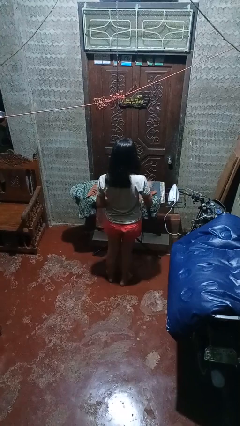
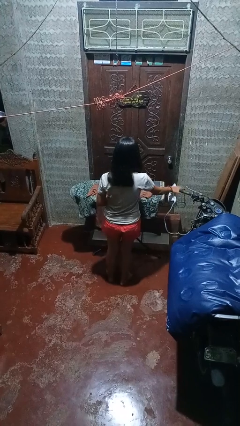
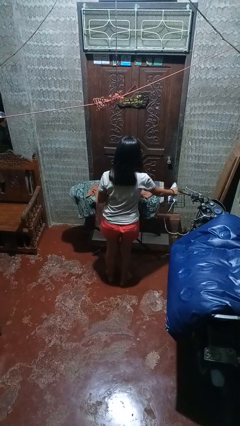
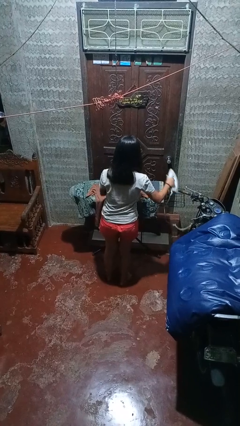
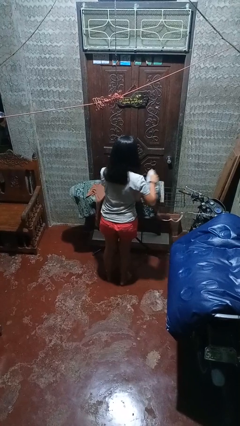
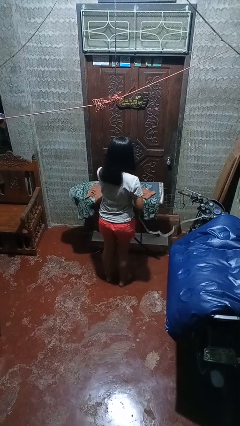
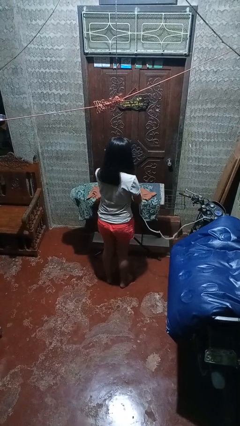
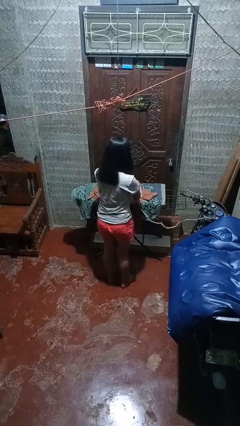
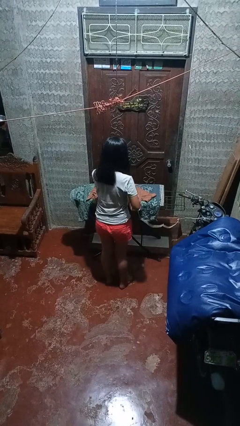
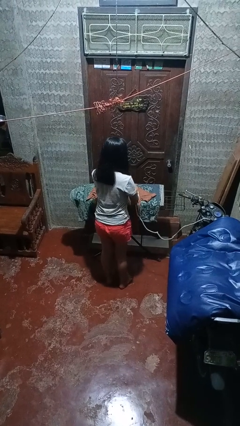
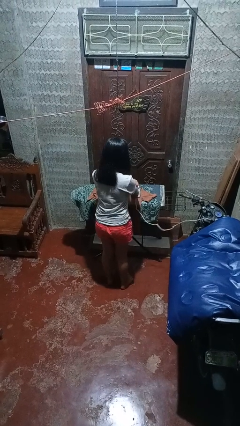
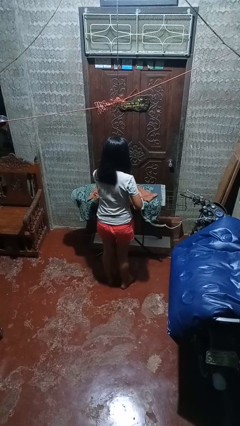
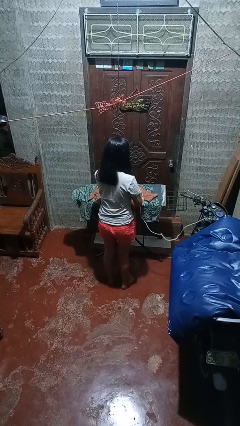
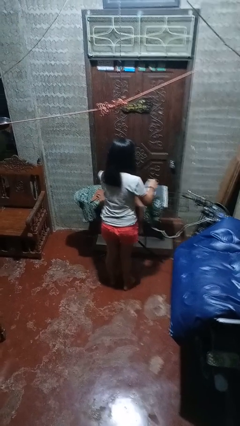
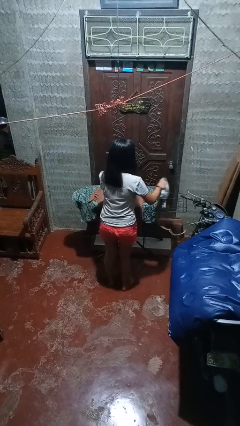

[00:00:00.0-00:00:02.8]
person irons clothes

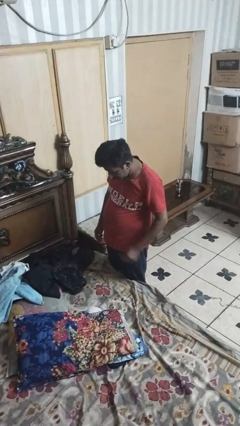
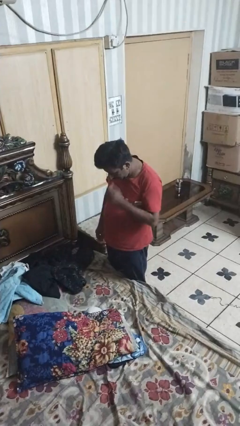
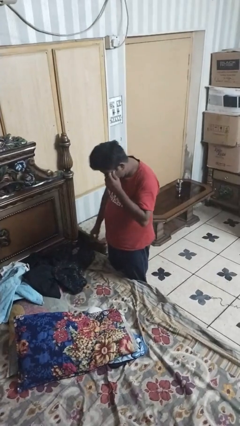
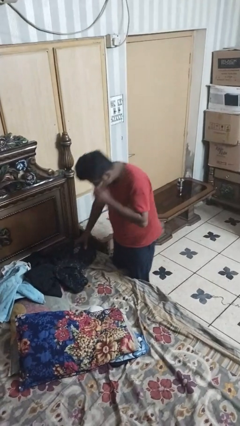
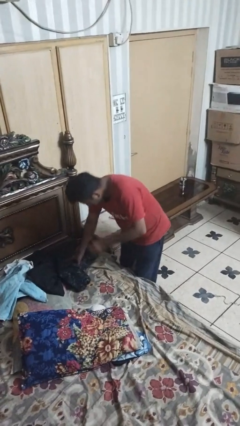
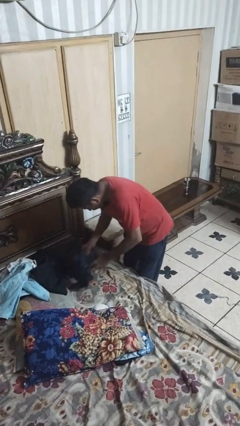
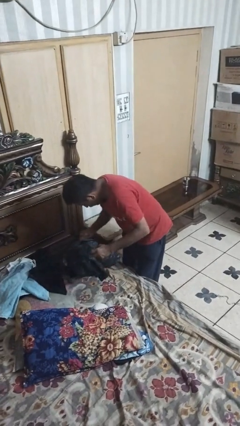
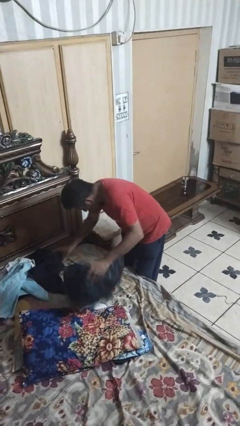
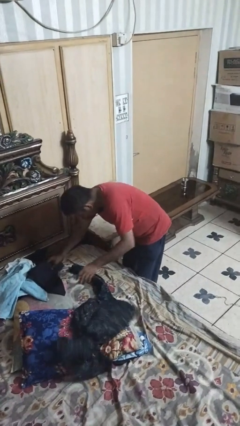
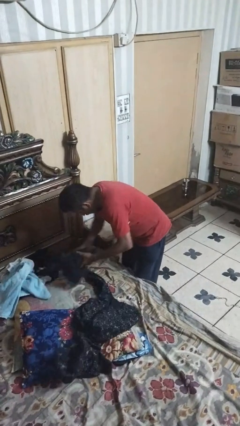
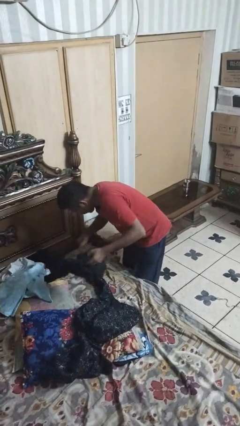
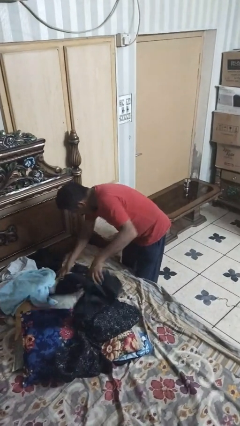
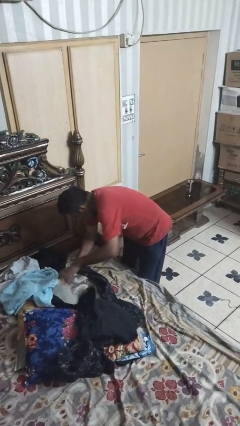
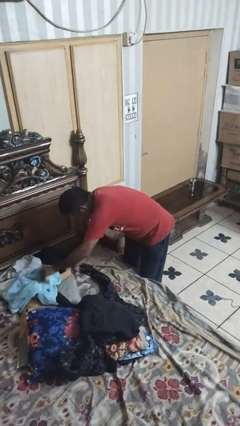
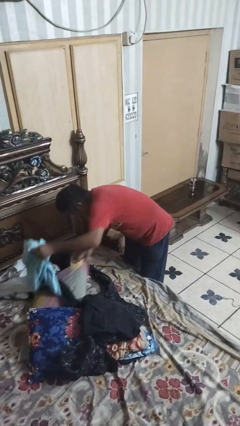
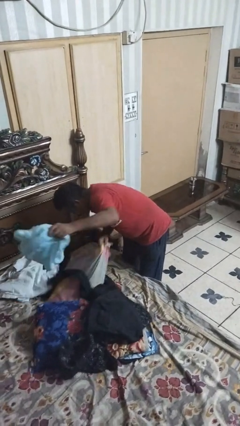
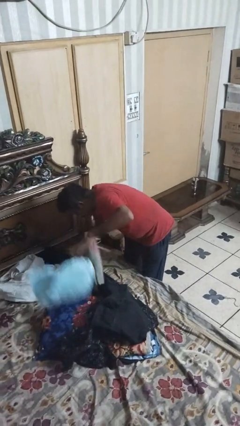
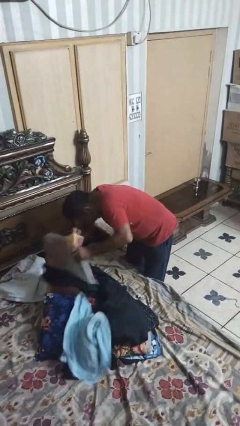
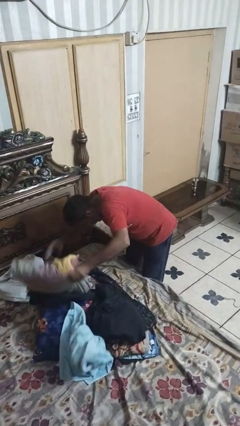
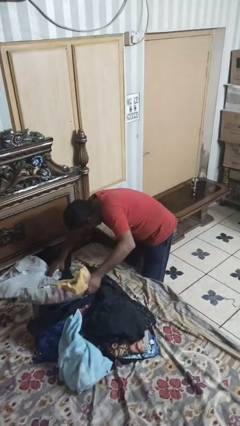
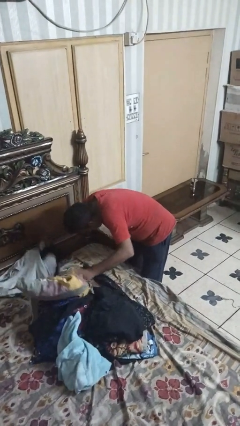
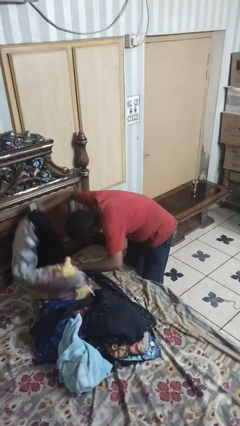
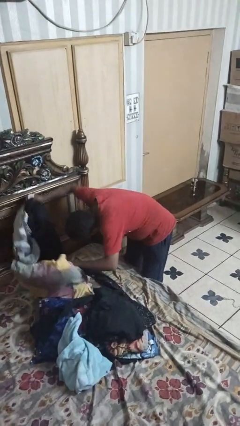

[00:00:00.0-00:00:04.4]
person searches under bed

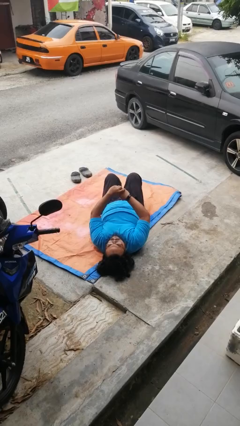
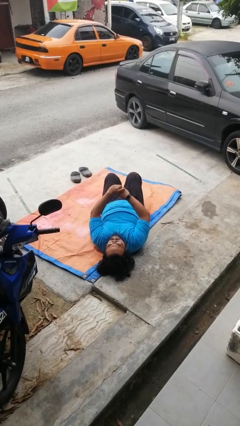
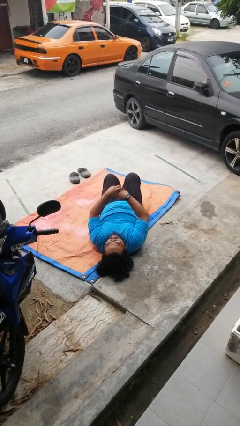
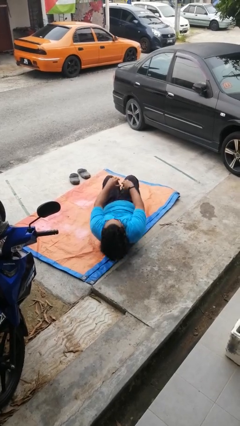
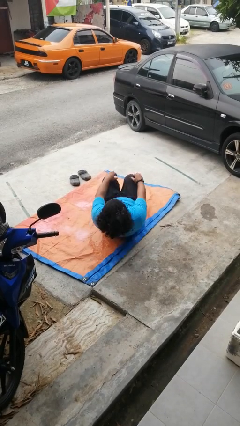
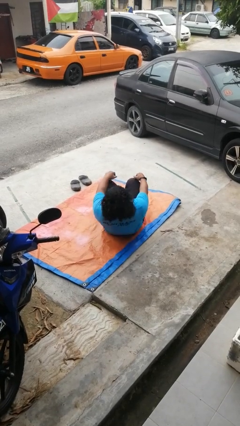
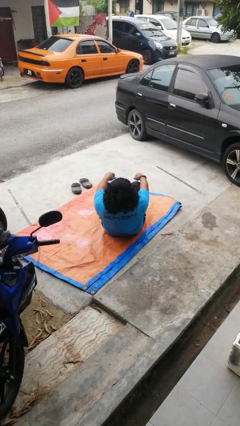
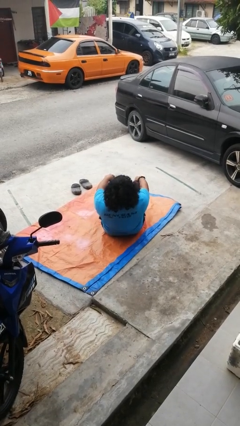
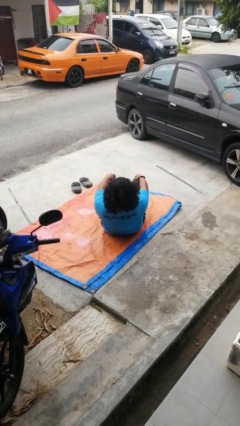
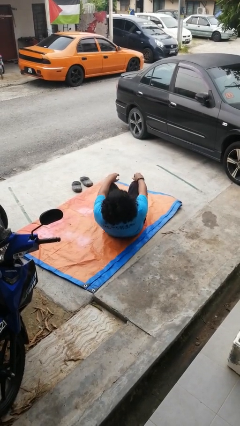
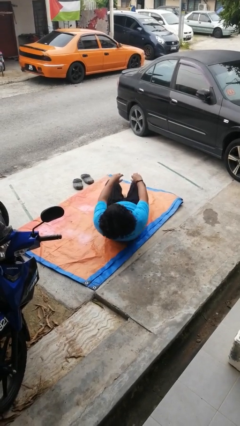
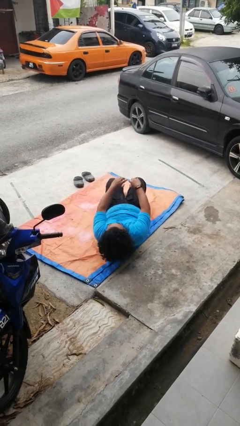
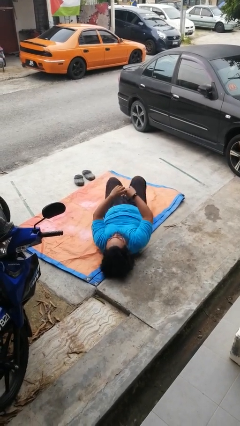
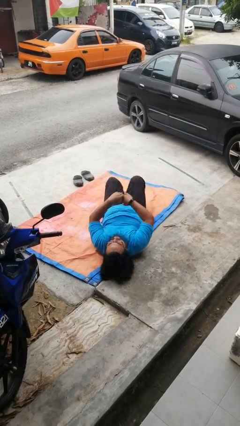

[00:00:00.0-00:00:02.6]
person exercises with situp

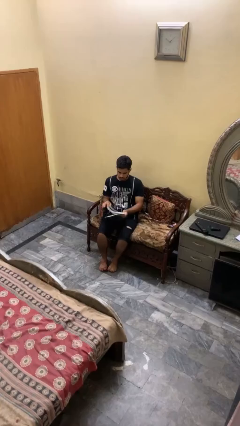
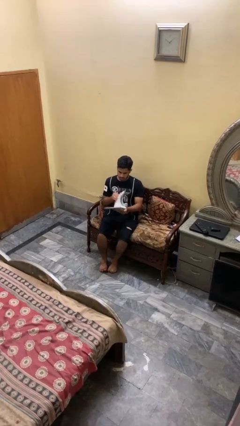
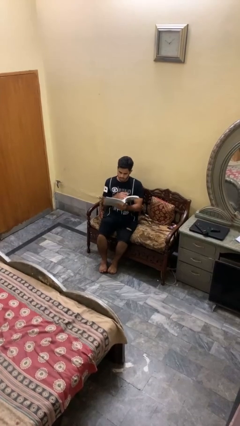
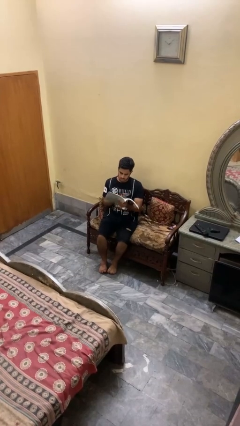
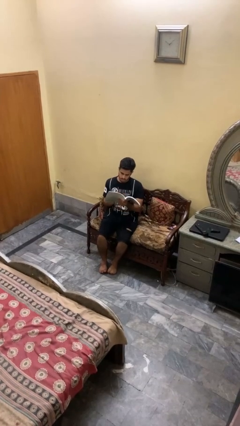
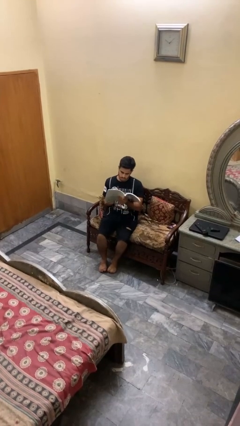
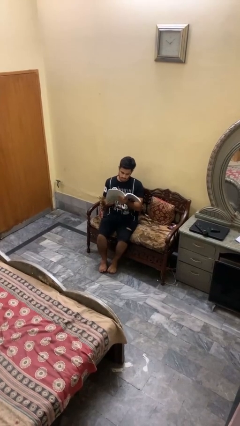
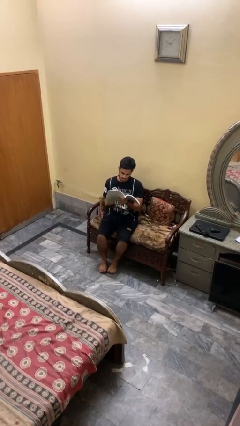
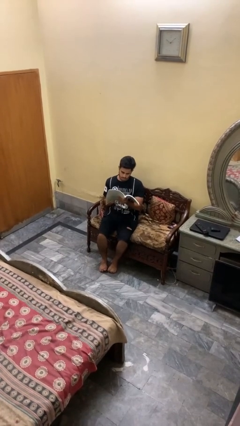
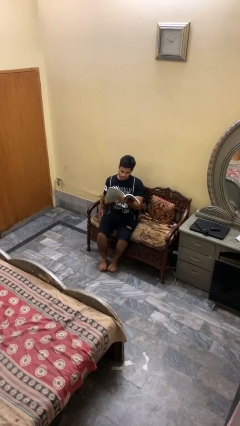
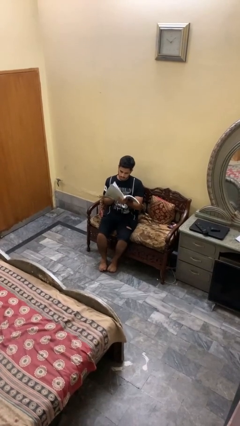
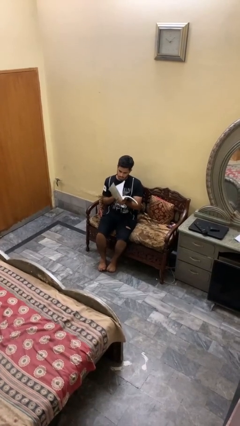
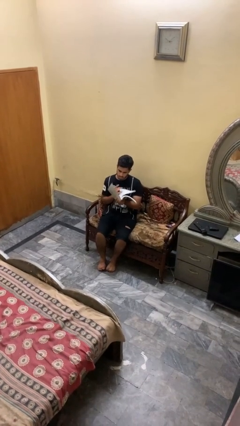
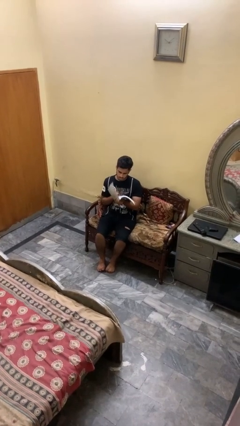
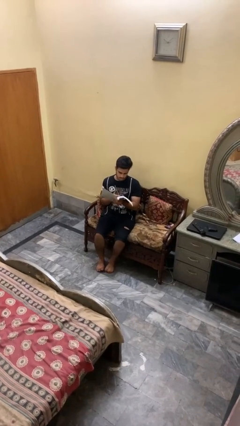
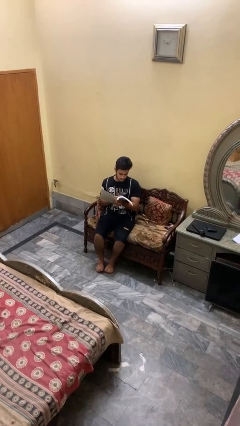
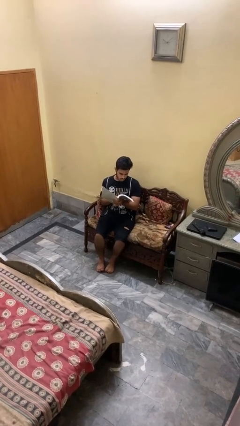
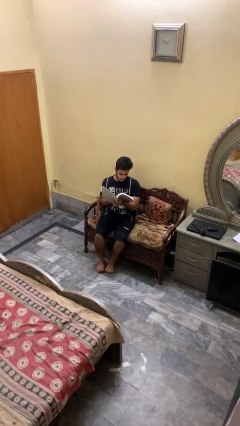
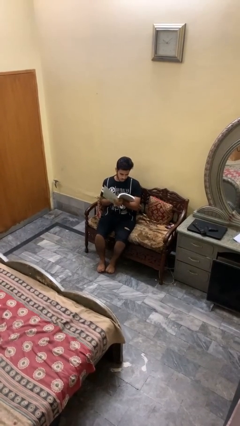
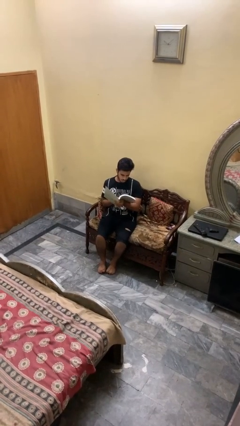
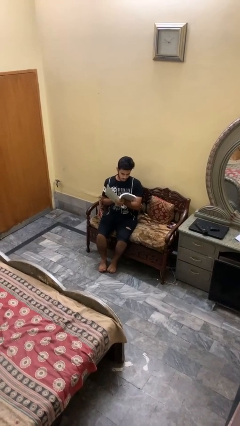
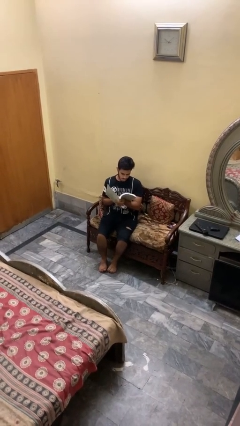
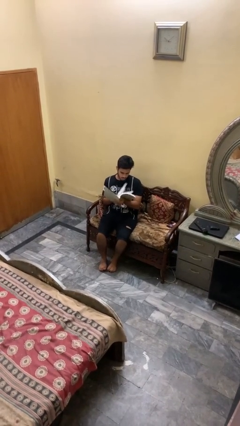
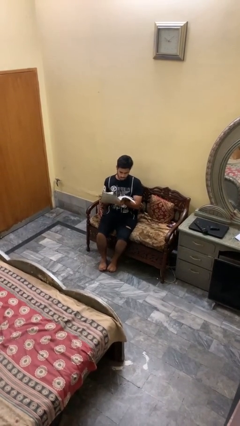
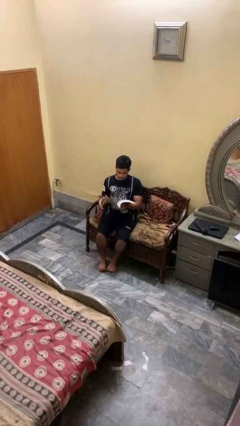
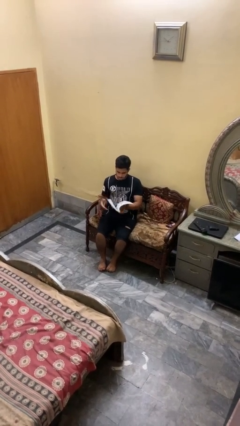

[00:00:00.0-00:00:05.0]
person reads book

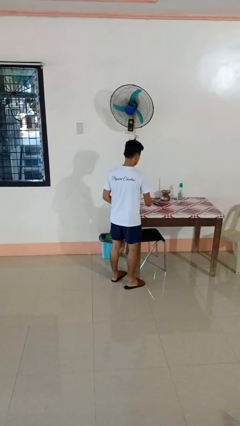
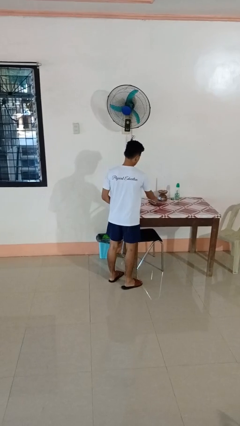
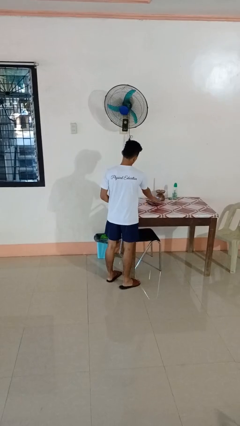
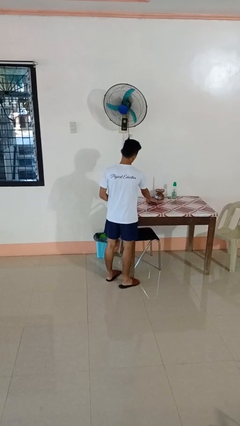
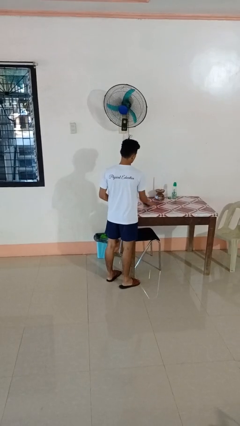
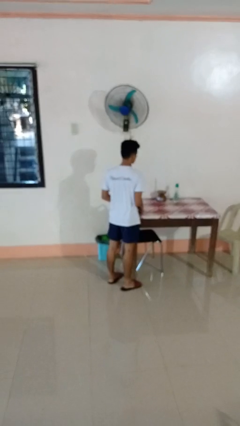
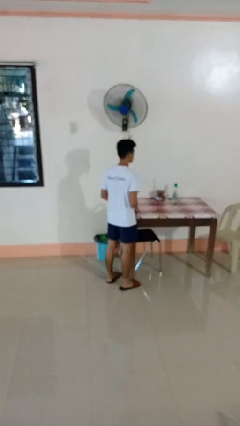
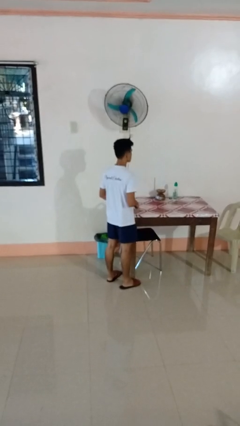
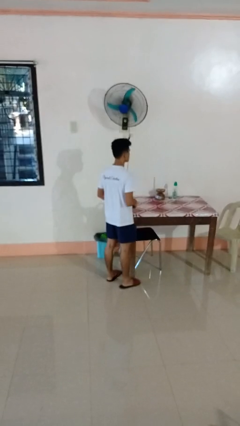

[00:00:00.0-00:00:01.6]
person picks up object from table

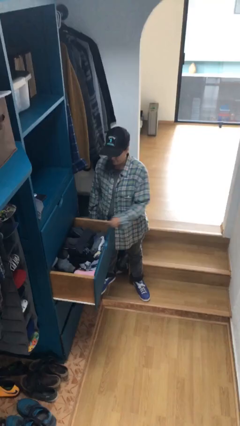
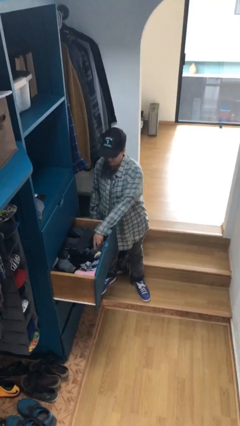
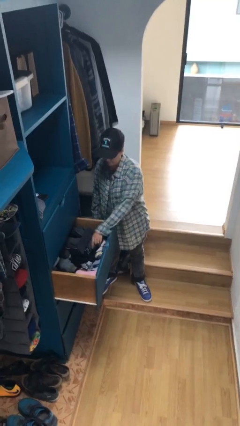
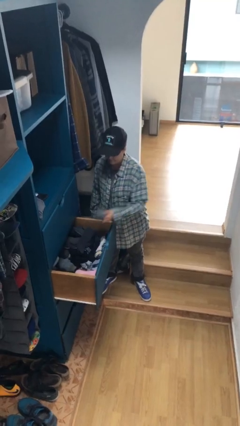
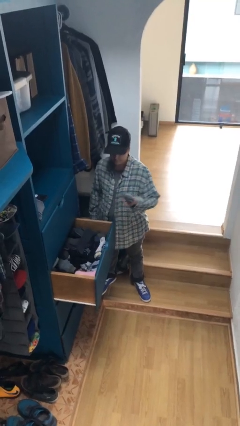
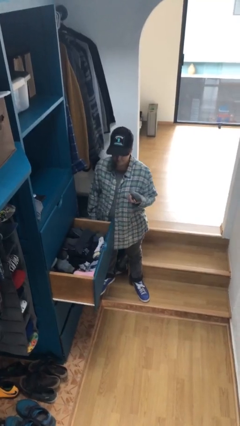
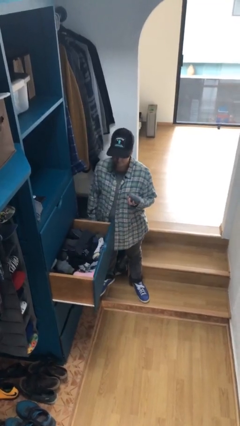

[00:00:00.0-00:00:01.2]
person takes clothes from dresser
